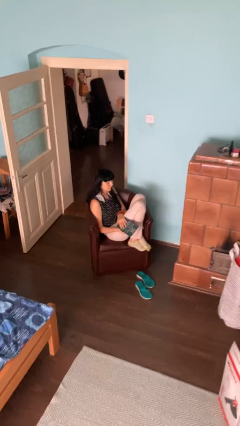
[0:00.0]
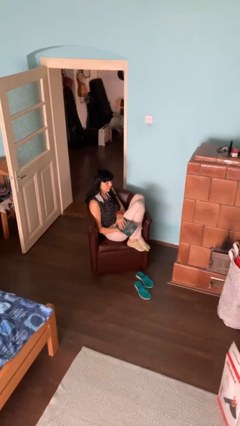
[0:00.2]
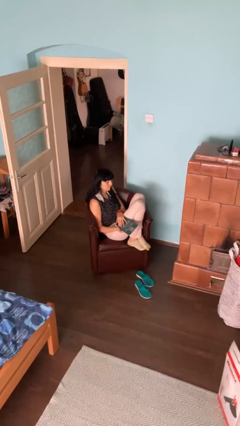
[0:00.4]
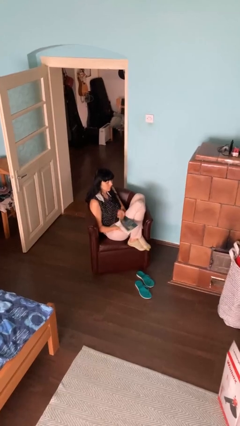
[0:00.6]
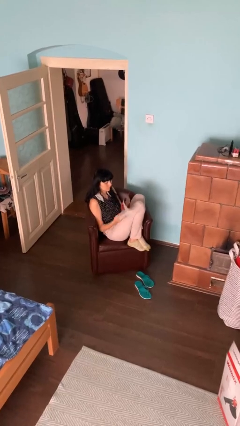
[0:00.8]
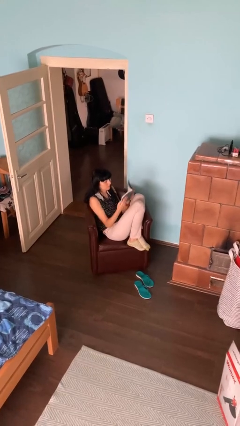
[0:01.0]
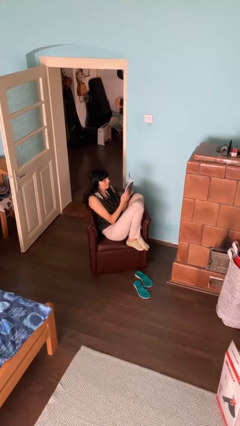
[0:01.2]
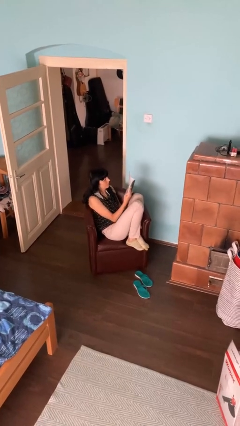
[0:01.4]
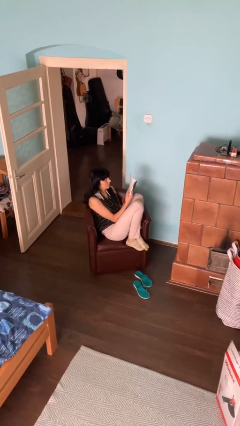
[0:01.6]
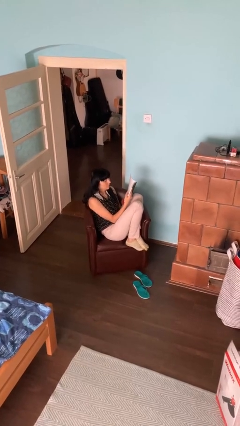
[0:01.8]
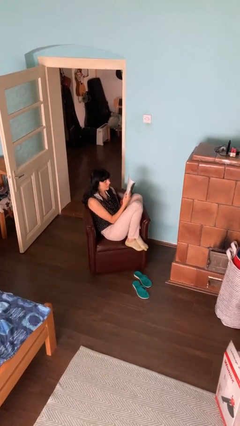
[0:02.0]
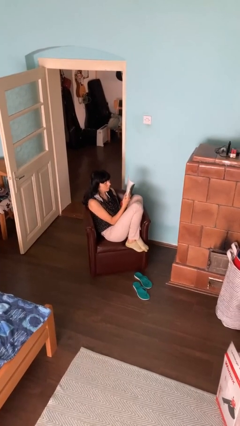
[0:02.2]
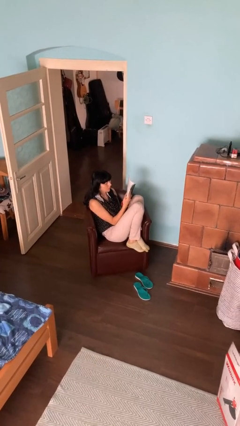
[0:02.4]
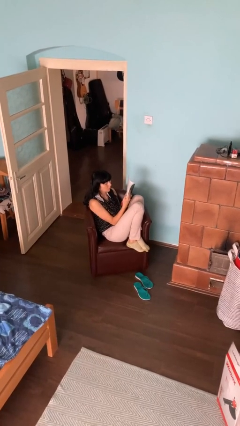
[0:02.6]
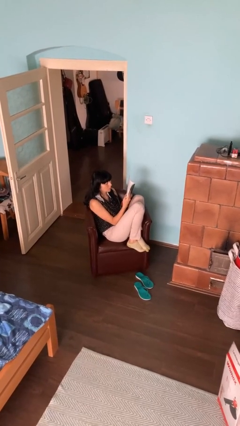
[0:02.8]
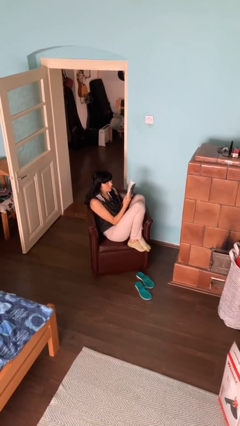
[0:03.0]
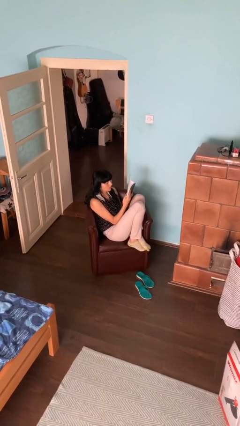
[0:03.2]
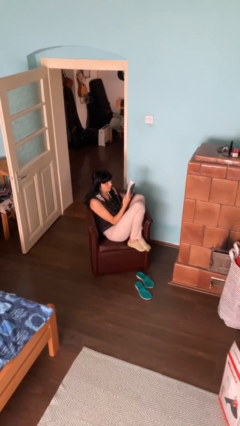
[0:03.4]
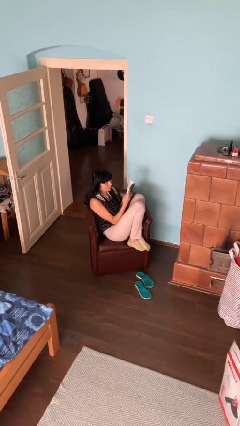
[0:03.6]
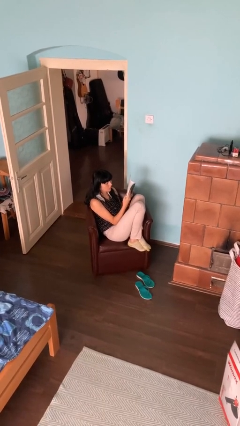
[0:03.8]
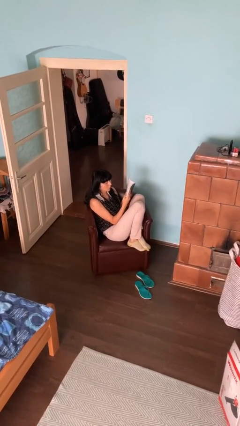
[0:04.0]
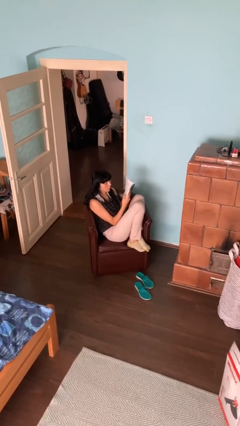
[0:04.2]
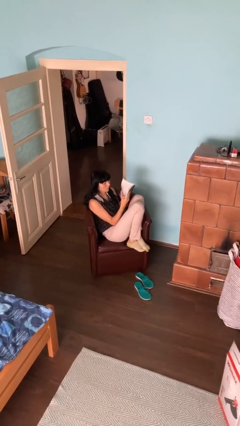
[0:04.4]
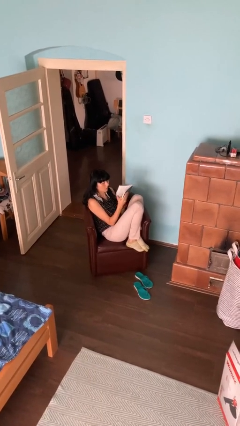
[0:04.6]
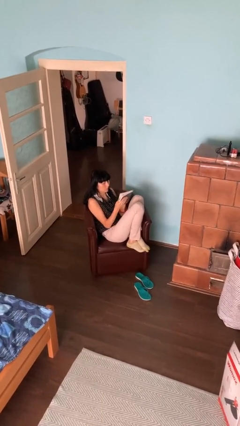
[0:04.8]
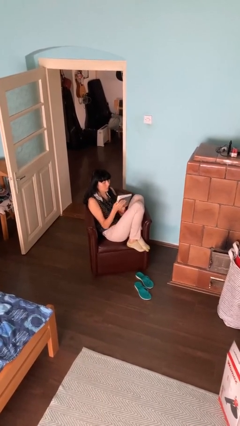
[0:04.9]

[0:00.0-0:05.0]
person reads book

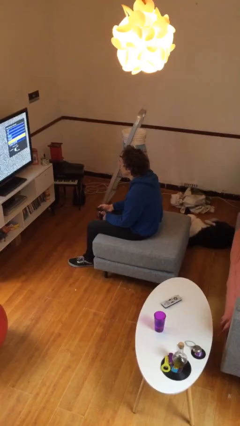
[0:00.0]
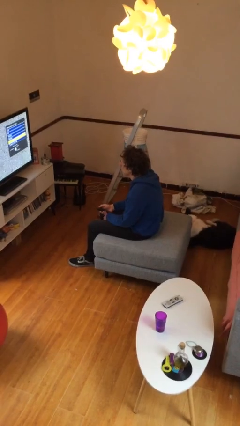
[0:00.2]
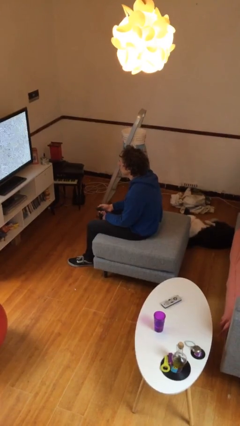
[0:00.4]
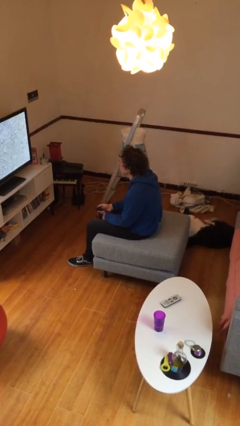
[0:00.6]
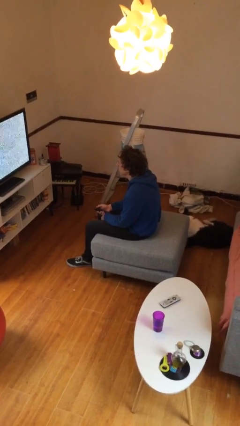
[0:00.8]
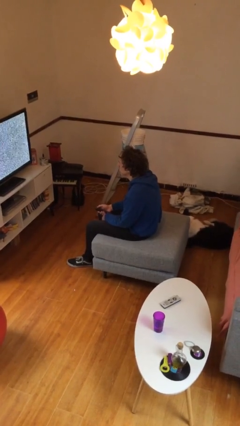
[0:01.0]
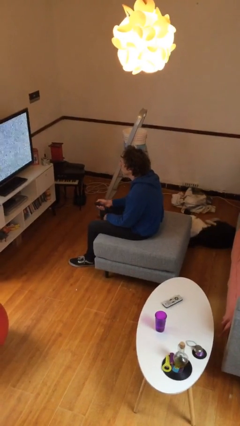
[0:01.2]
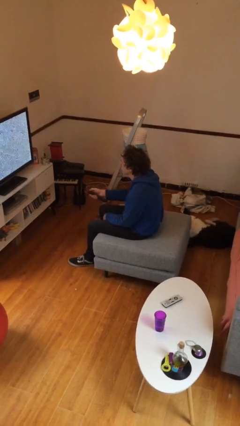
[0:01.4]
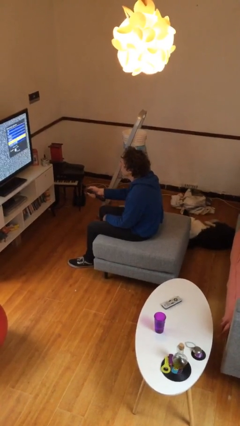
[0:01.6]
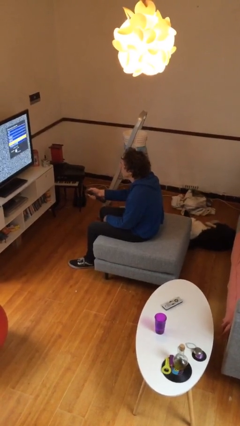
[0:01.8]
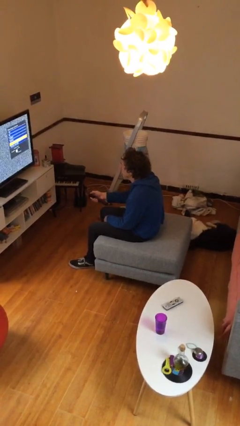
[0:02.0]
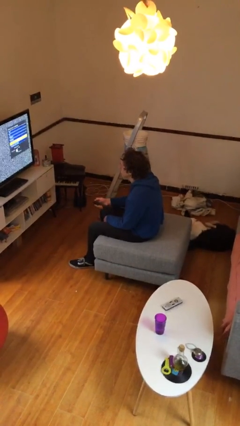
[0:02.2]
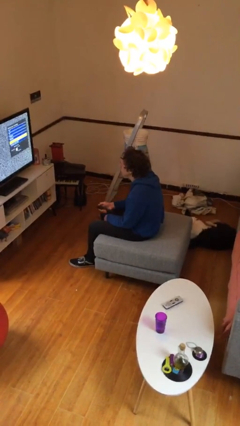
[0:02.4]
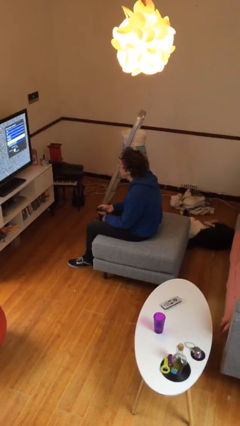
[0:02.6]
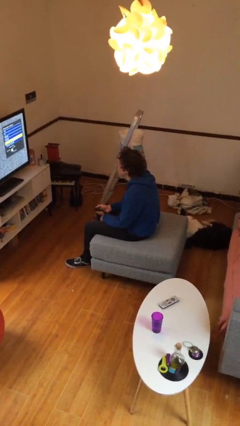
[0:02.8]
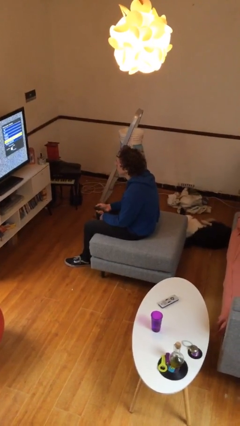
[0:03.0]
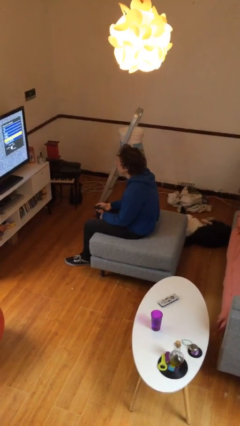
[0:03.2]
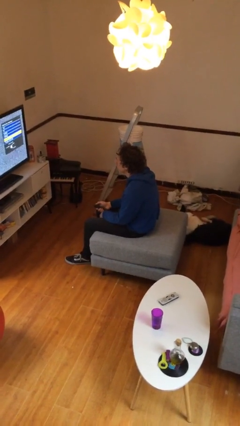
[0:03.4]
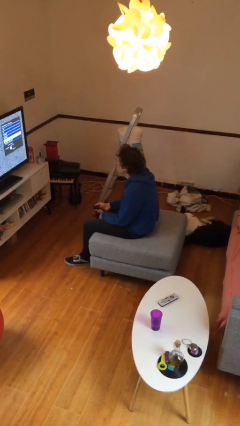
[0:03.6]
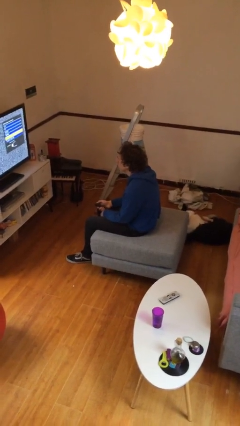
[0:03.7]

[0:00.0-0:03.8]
person uses television remote

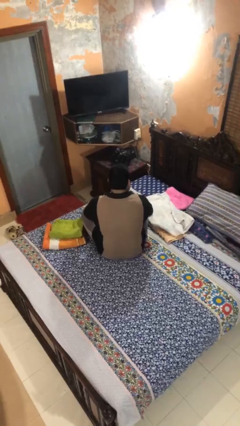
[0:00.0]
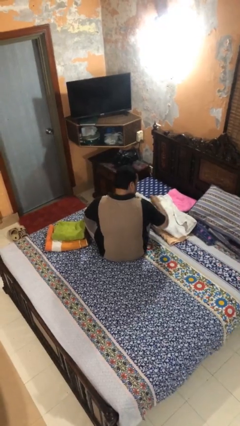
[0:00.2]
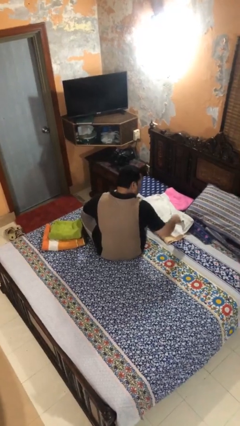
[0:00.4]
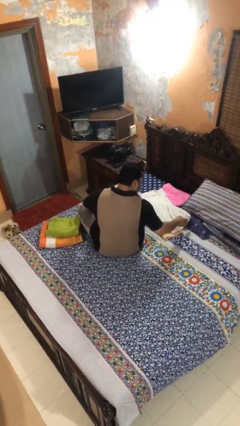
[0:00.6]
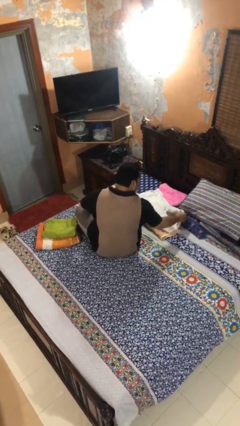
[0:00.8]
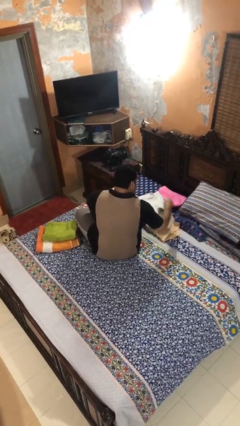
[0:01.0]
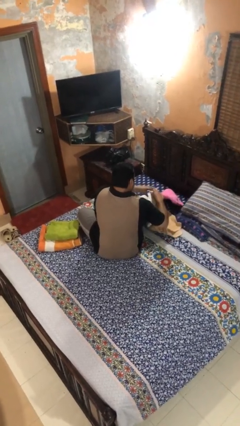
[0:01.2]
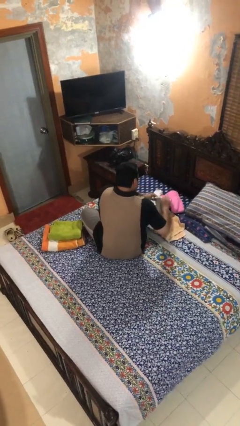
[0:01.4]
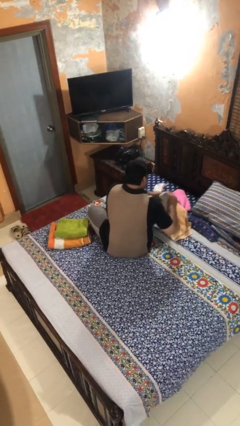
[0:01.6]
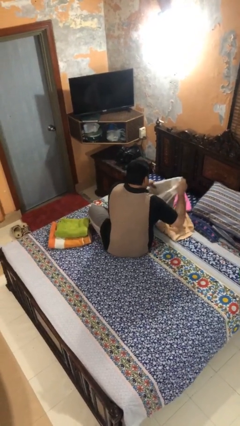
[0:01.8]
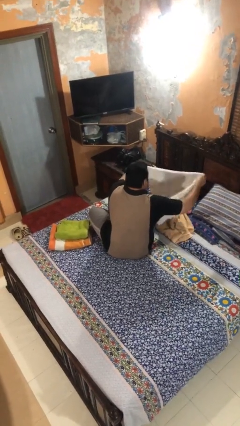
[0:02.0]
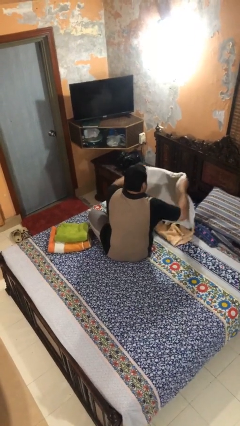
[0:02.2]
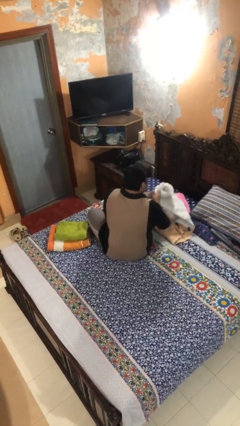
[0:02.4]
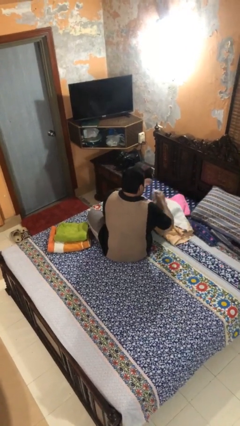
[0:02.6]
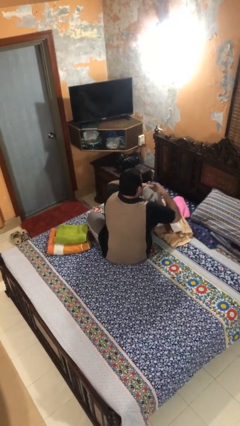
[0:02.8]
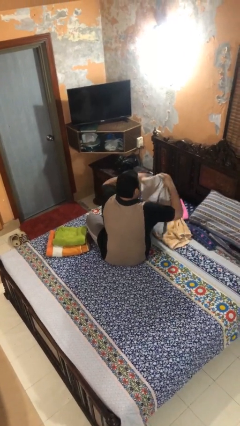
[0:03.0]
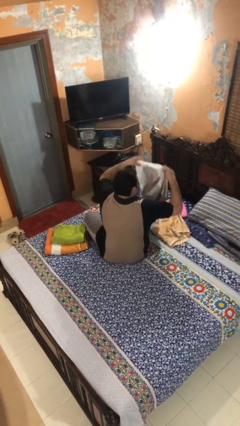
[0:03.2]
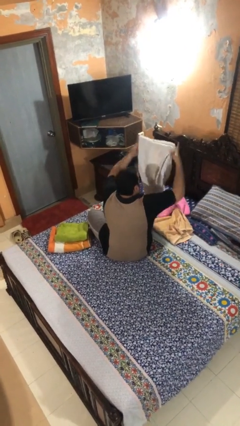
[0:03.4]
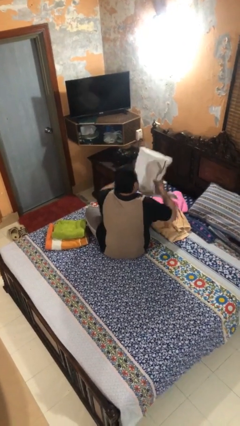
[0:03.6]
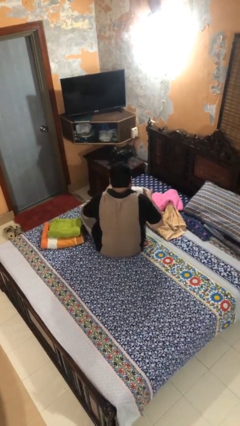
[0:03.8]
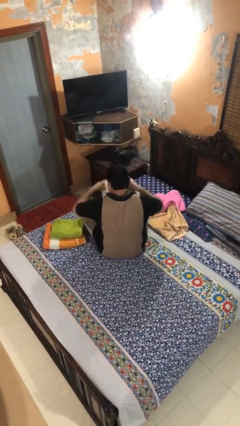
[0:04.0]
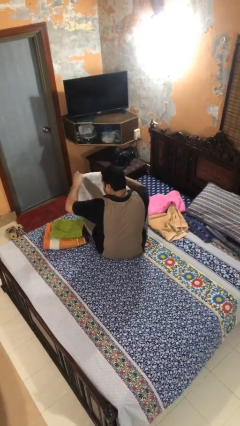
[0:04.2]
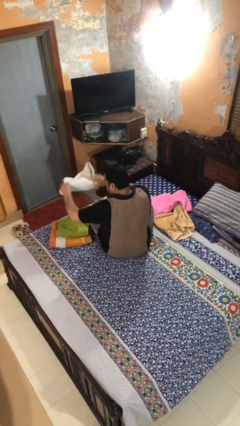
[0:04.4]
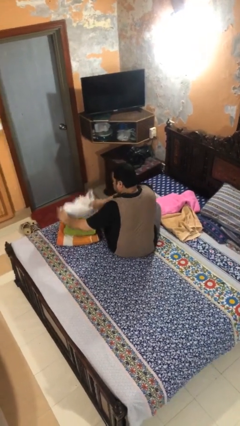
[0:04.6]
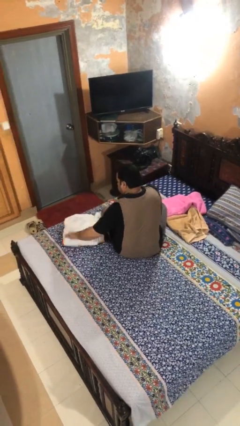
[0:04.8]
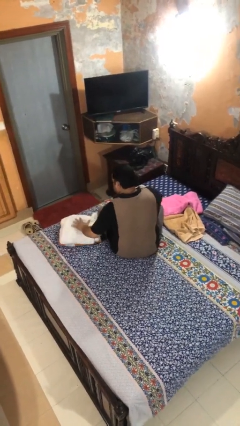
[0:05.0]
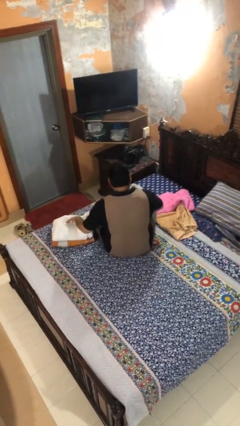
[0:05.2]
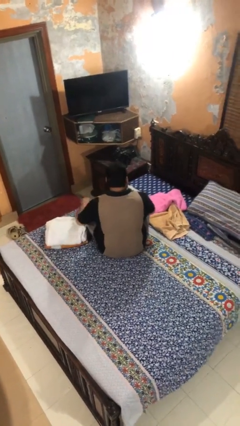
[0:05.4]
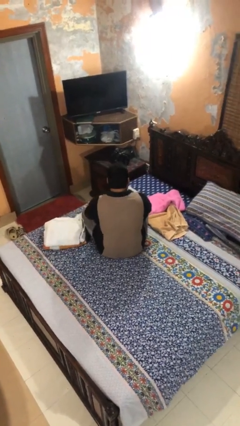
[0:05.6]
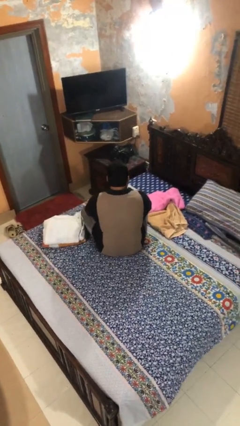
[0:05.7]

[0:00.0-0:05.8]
person folds towel

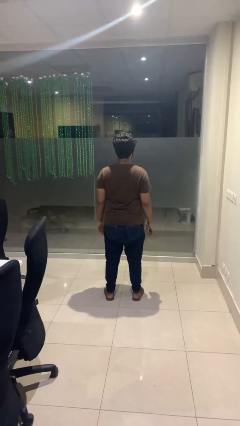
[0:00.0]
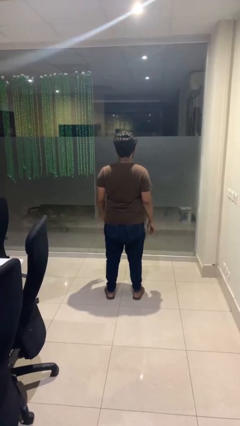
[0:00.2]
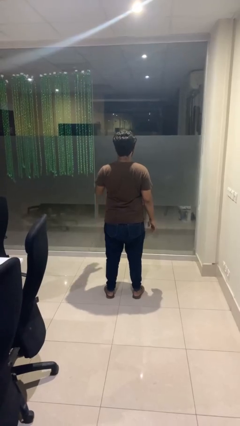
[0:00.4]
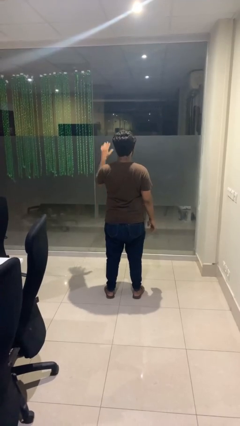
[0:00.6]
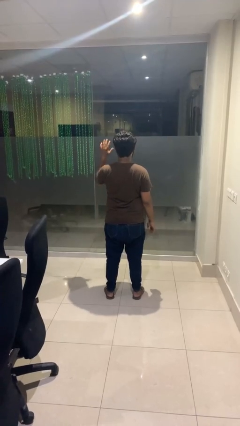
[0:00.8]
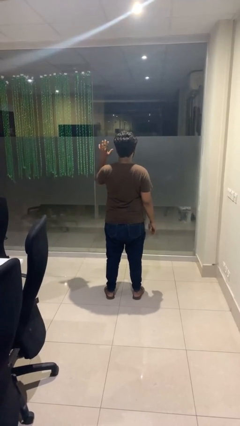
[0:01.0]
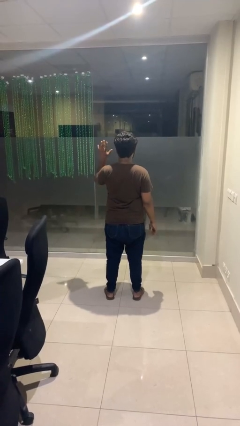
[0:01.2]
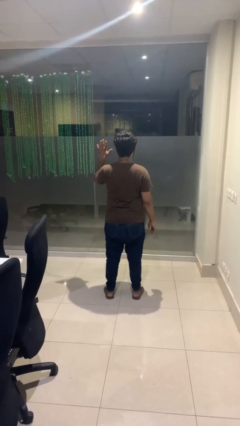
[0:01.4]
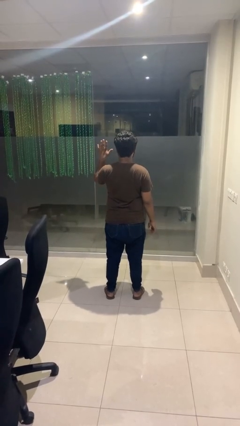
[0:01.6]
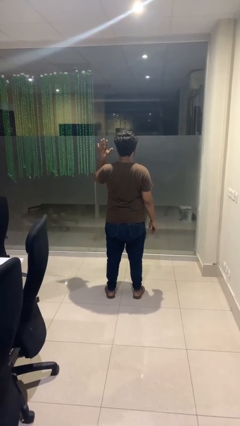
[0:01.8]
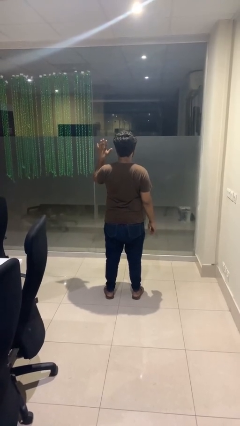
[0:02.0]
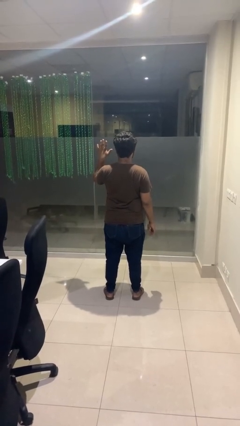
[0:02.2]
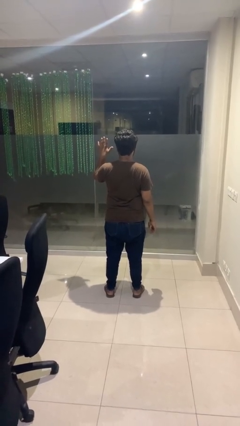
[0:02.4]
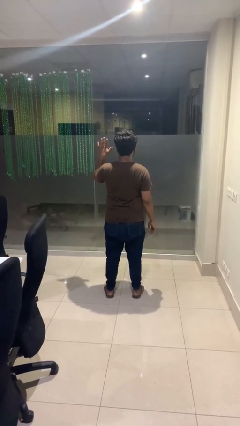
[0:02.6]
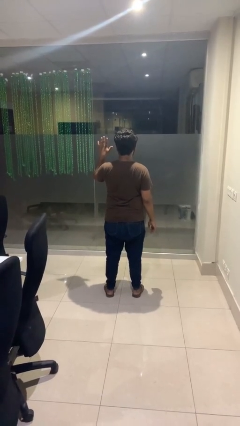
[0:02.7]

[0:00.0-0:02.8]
person gestures number five

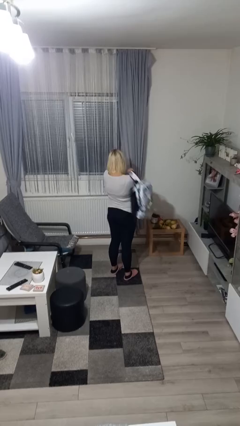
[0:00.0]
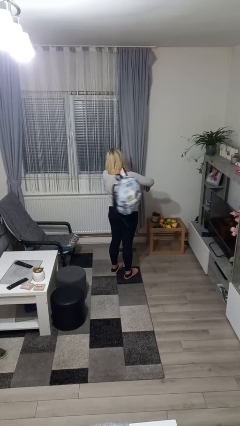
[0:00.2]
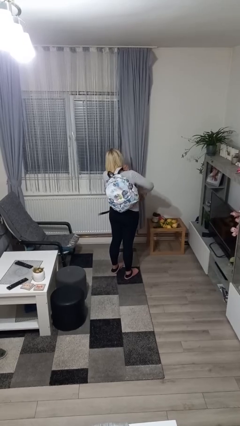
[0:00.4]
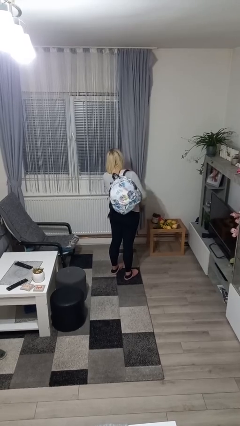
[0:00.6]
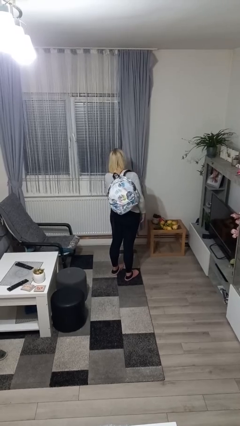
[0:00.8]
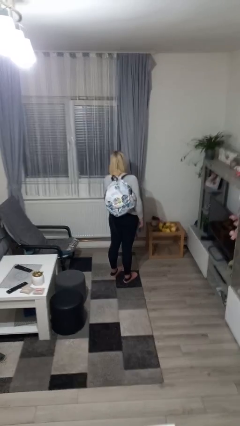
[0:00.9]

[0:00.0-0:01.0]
person puts on backpack
